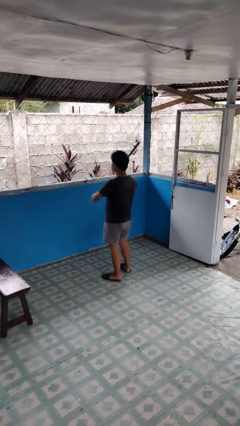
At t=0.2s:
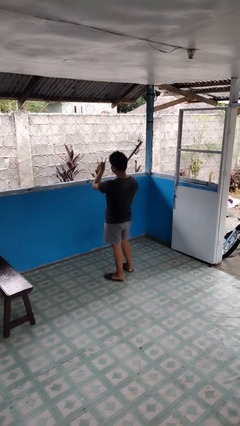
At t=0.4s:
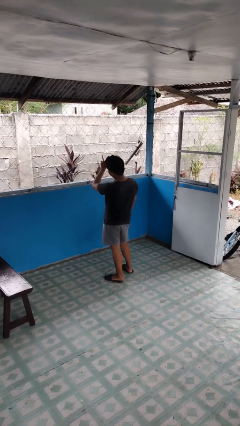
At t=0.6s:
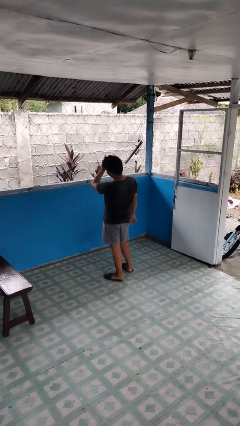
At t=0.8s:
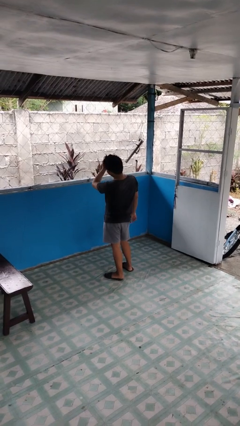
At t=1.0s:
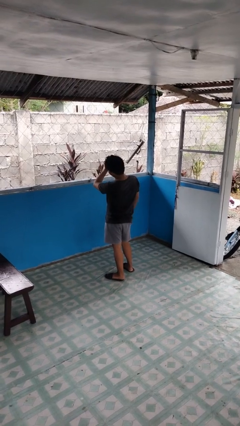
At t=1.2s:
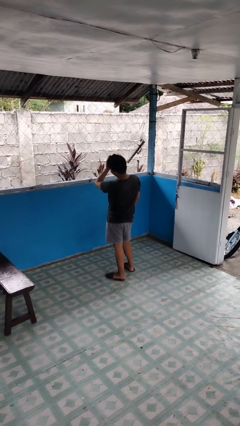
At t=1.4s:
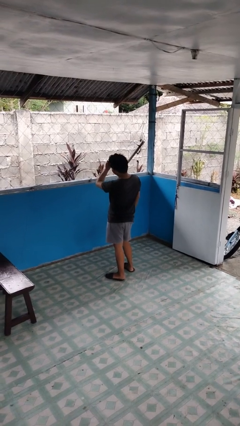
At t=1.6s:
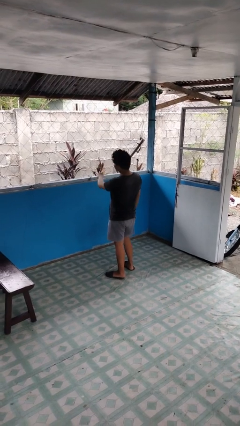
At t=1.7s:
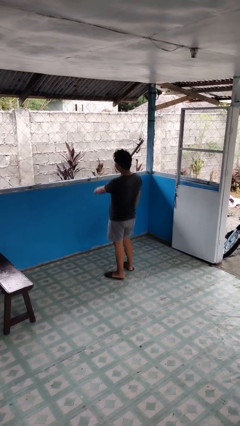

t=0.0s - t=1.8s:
person gestures peace

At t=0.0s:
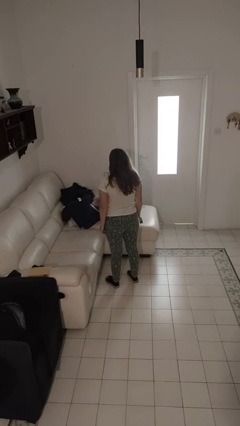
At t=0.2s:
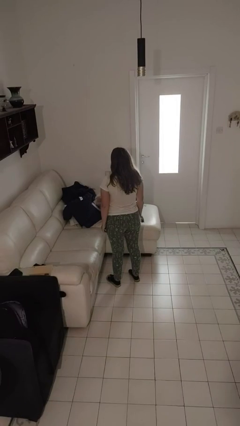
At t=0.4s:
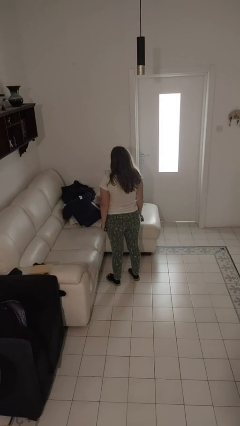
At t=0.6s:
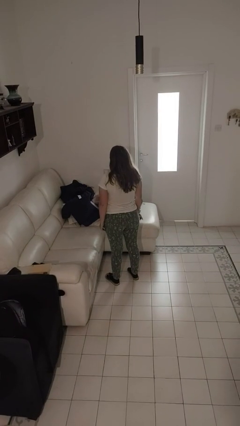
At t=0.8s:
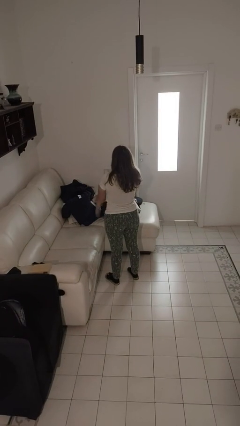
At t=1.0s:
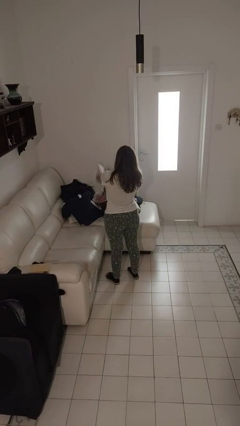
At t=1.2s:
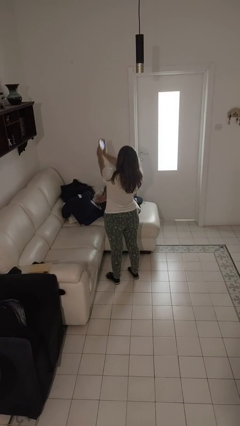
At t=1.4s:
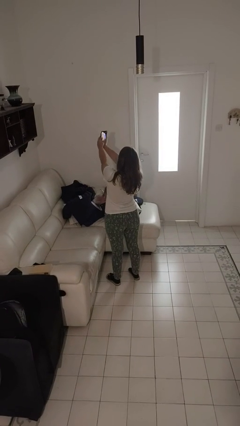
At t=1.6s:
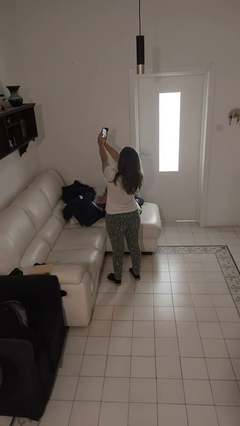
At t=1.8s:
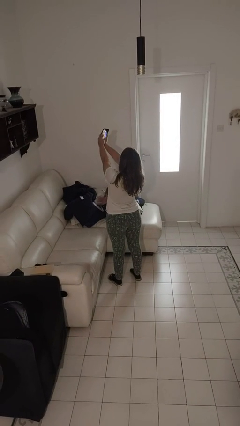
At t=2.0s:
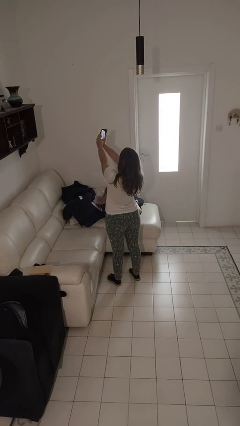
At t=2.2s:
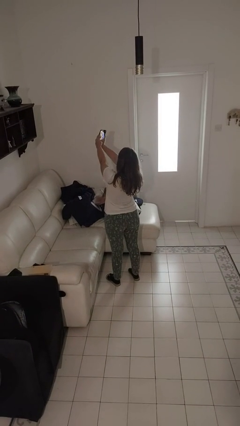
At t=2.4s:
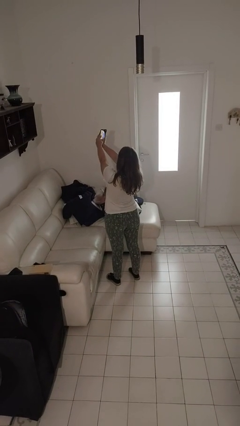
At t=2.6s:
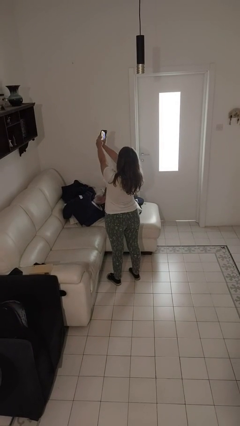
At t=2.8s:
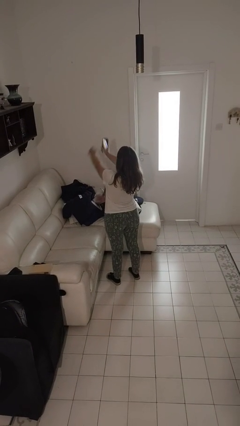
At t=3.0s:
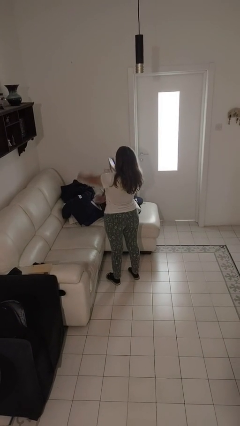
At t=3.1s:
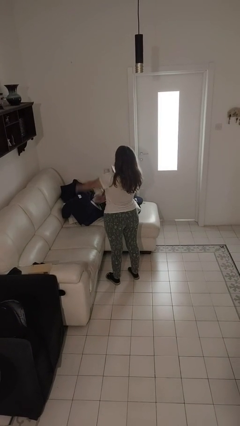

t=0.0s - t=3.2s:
person takes selfie

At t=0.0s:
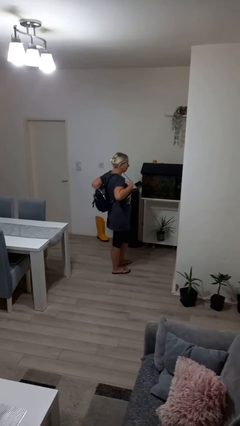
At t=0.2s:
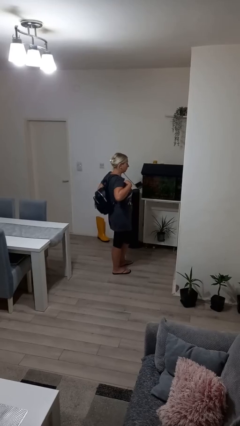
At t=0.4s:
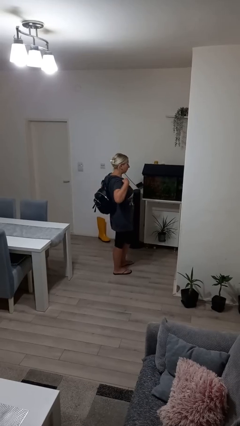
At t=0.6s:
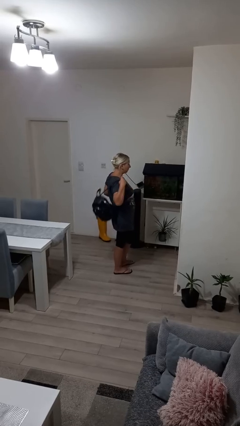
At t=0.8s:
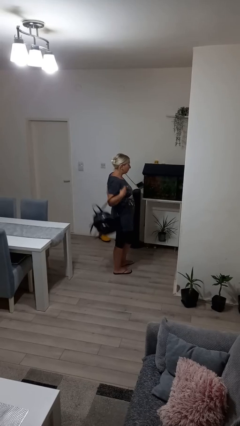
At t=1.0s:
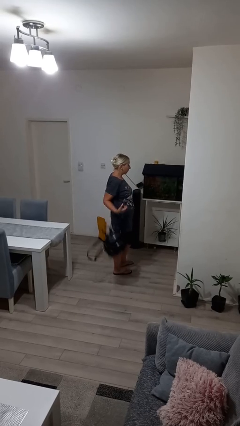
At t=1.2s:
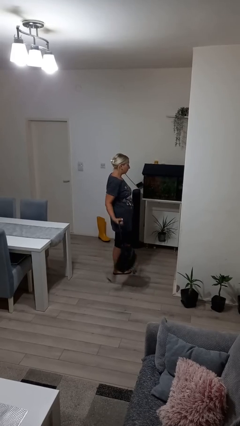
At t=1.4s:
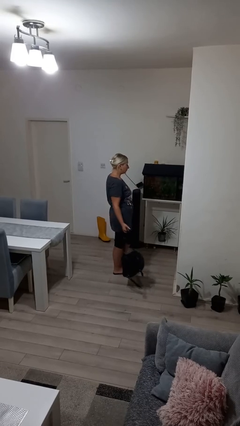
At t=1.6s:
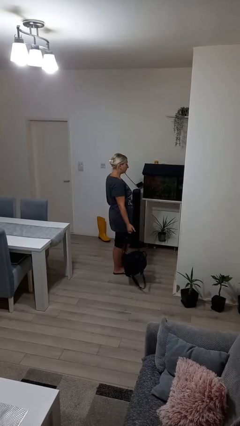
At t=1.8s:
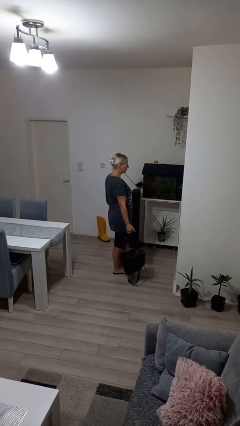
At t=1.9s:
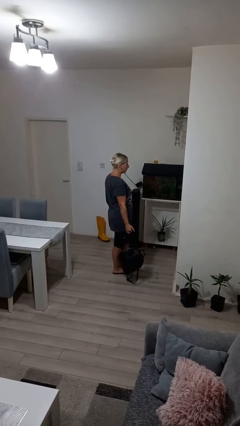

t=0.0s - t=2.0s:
person takes off backpack

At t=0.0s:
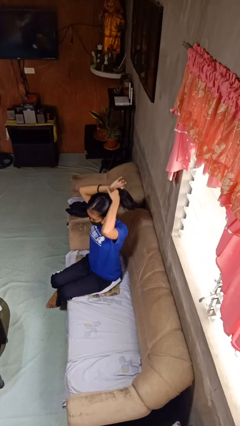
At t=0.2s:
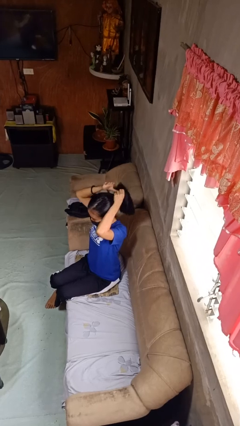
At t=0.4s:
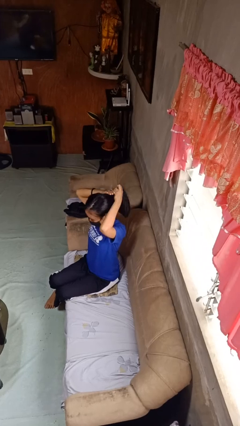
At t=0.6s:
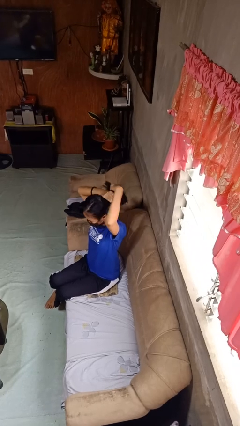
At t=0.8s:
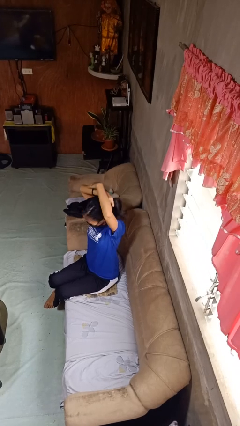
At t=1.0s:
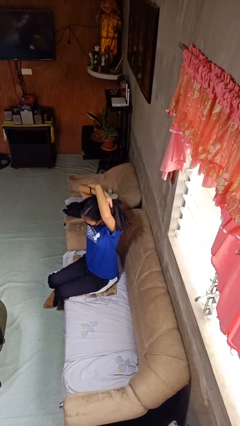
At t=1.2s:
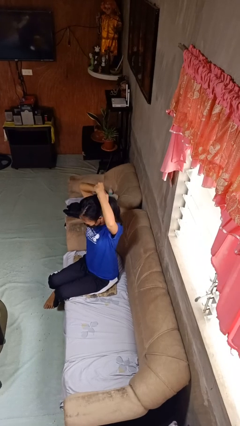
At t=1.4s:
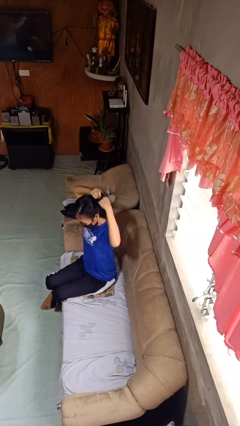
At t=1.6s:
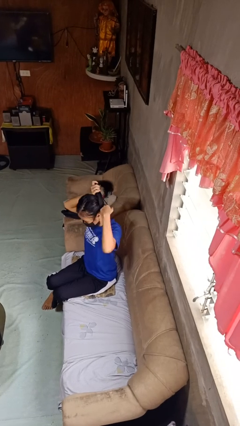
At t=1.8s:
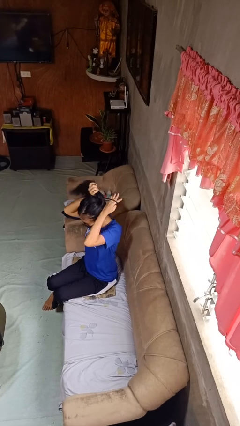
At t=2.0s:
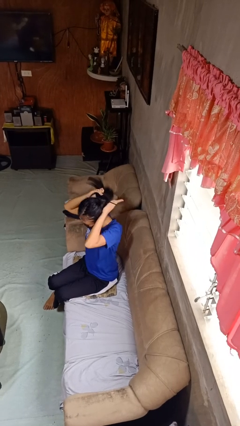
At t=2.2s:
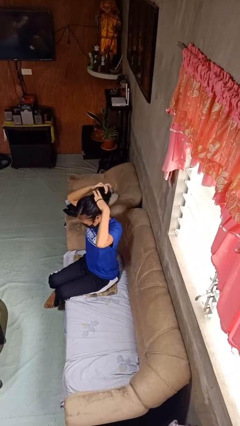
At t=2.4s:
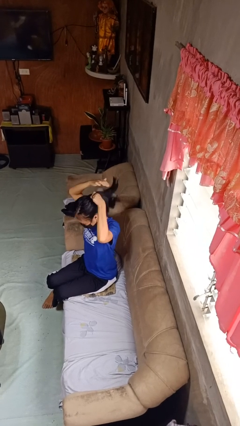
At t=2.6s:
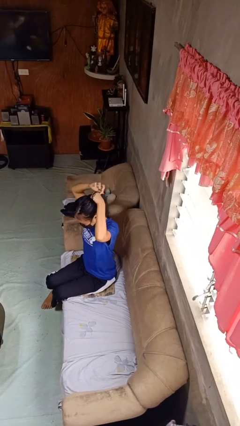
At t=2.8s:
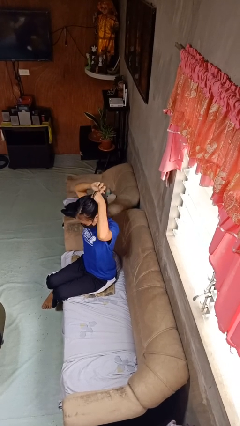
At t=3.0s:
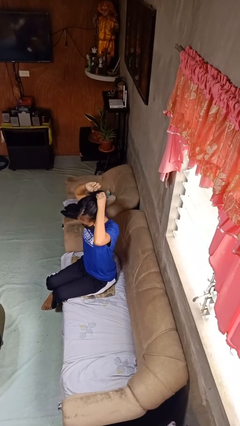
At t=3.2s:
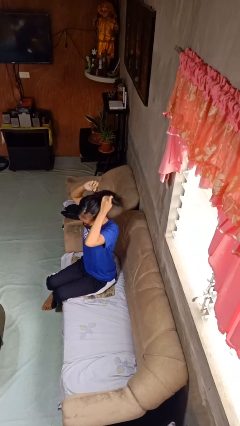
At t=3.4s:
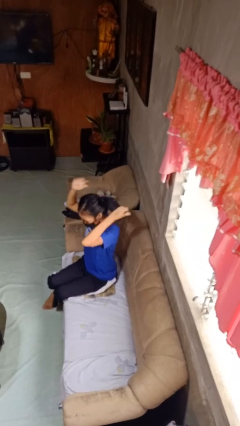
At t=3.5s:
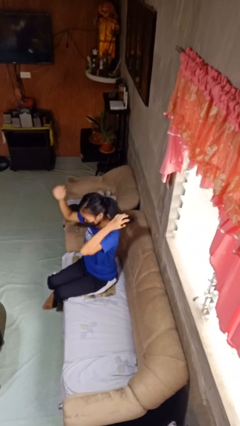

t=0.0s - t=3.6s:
person puts hair in ponytail

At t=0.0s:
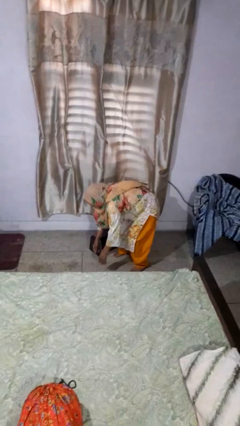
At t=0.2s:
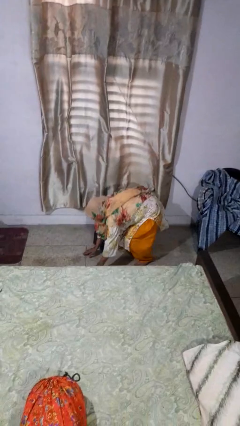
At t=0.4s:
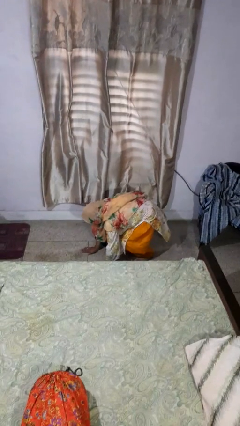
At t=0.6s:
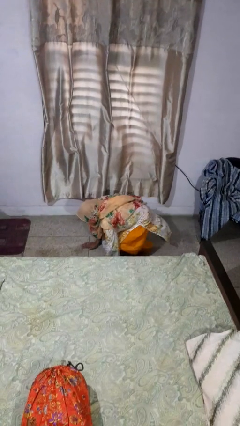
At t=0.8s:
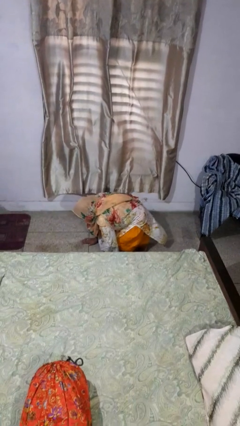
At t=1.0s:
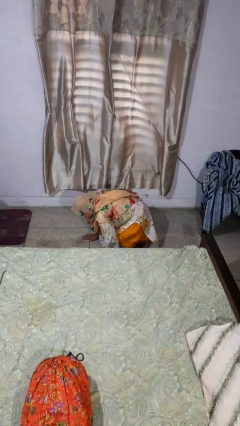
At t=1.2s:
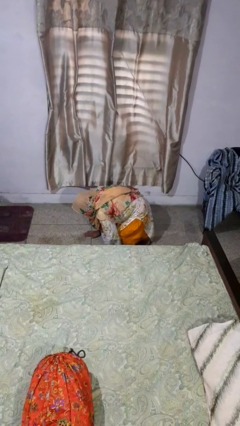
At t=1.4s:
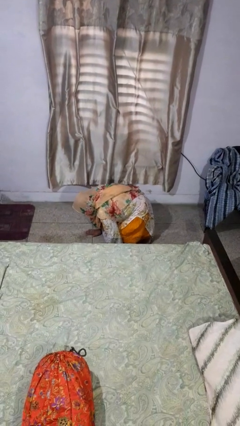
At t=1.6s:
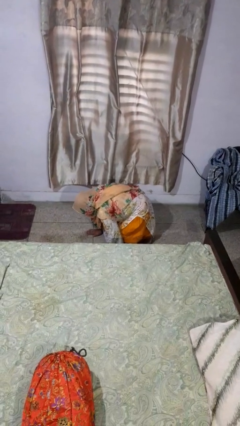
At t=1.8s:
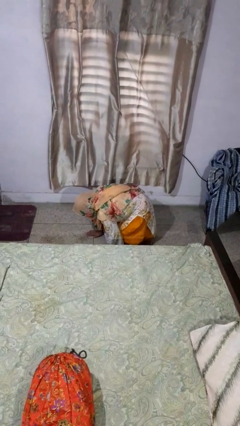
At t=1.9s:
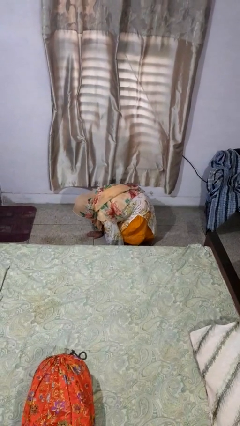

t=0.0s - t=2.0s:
person lies down on floor

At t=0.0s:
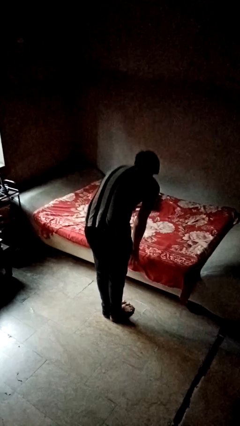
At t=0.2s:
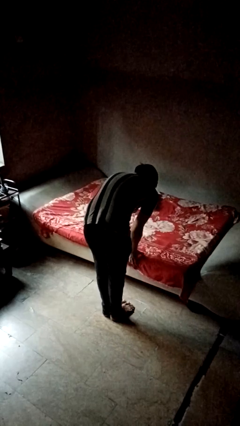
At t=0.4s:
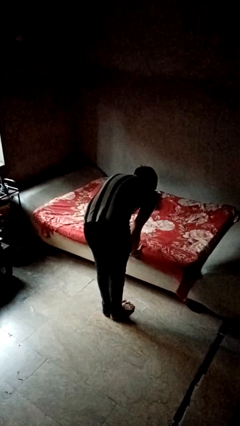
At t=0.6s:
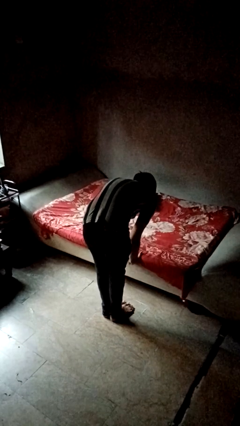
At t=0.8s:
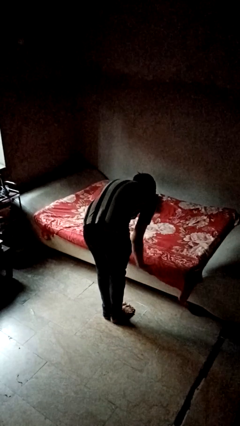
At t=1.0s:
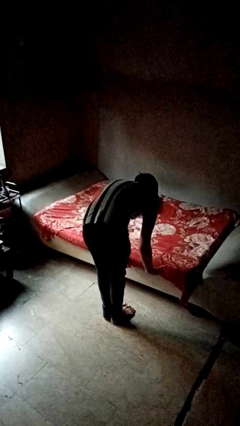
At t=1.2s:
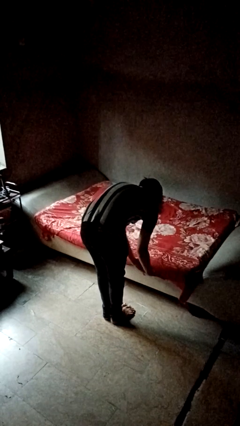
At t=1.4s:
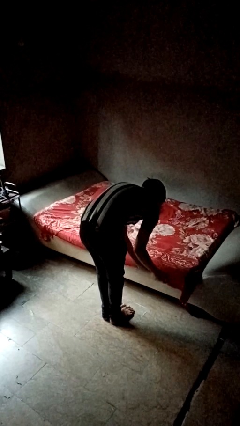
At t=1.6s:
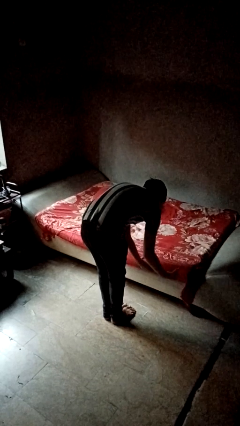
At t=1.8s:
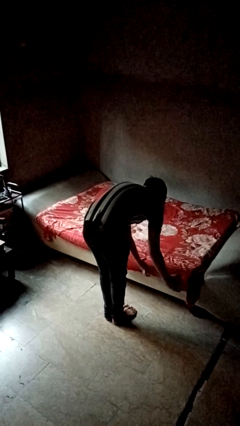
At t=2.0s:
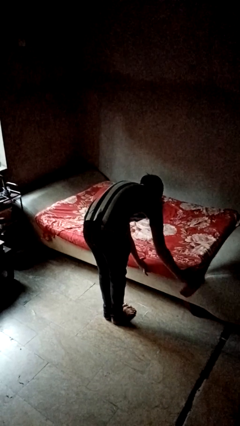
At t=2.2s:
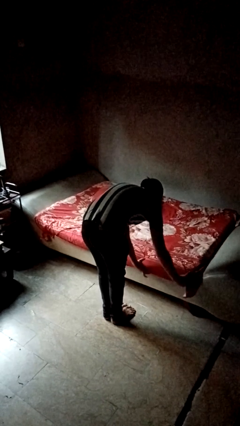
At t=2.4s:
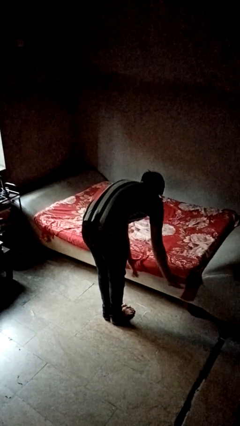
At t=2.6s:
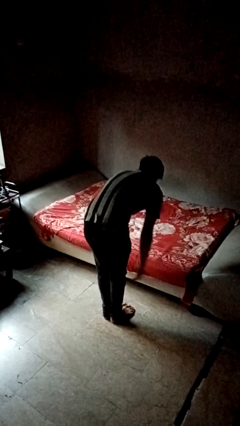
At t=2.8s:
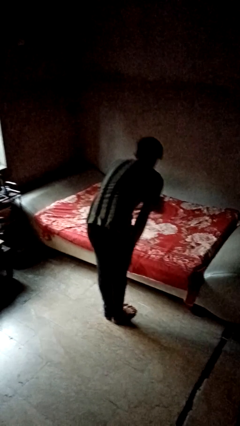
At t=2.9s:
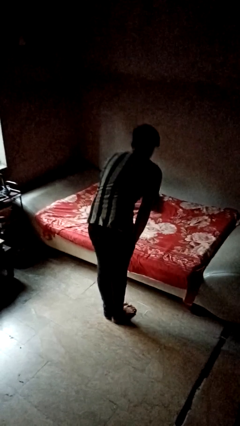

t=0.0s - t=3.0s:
person makes bed

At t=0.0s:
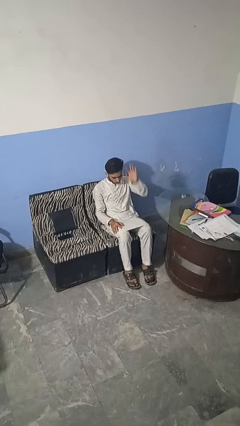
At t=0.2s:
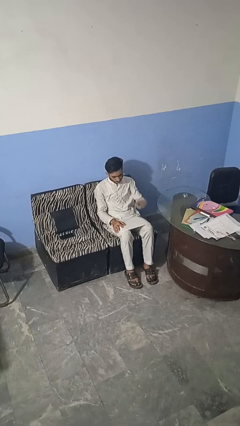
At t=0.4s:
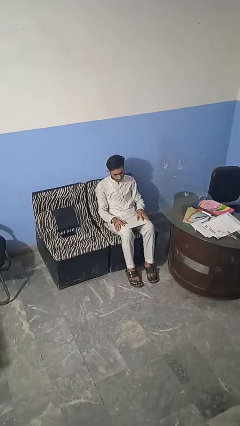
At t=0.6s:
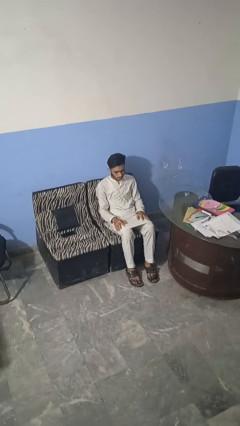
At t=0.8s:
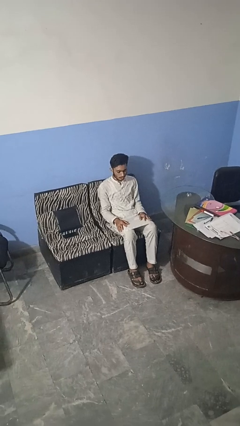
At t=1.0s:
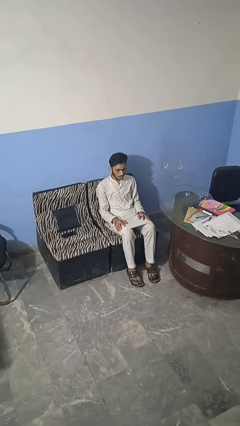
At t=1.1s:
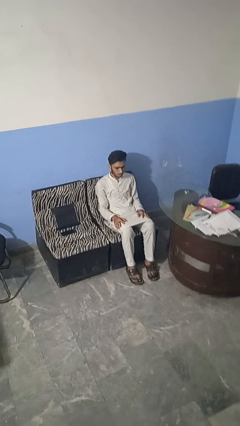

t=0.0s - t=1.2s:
person gestures swipe down

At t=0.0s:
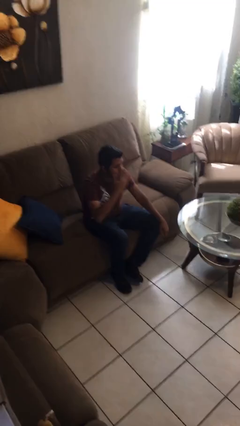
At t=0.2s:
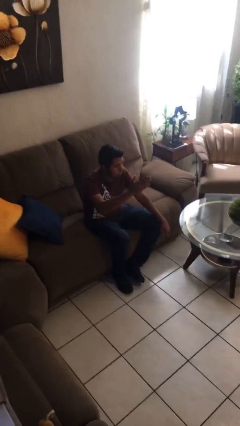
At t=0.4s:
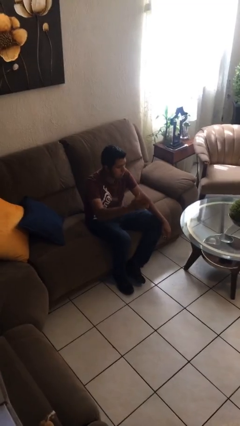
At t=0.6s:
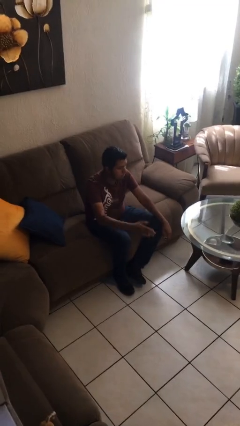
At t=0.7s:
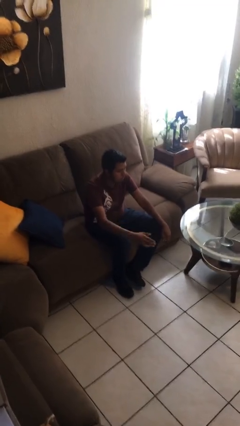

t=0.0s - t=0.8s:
person gestures blow kiss
